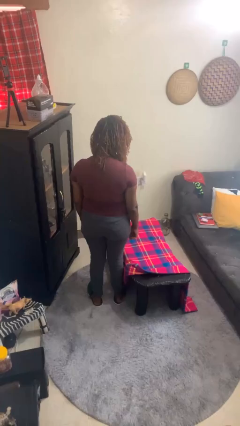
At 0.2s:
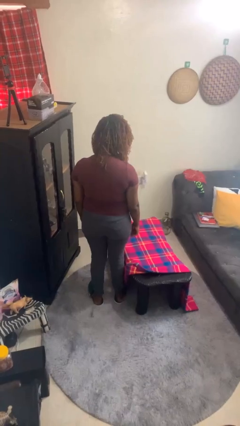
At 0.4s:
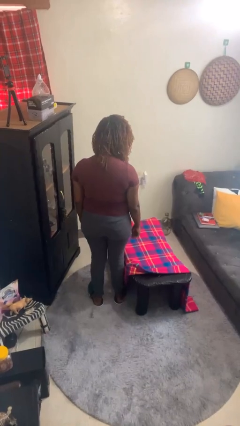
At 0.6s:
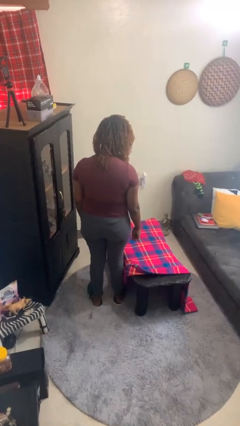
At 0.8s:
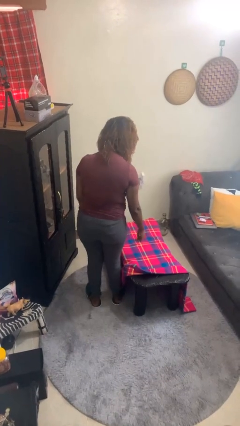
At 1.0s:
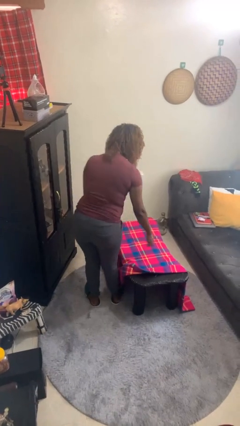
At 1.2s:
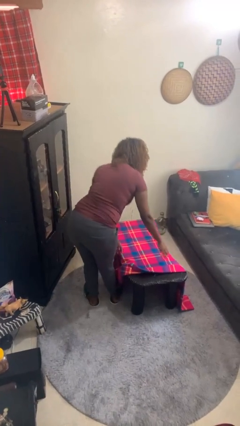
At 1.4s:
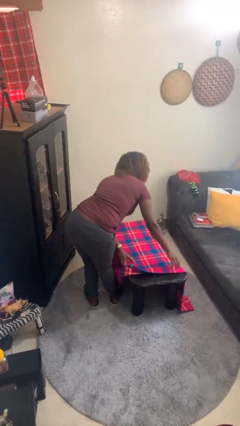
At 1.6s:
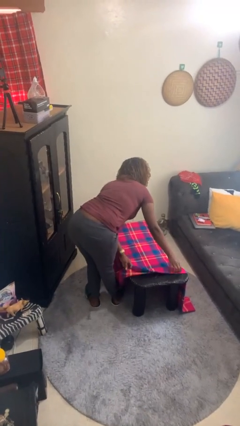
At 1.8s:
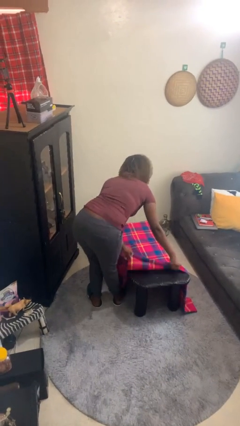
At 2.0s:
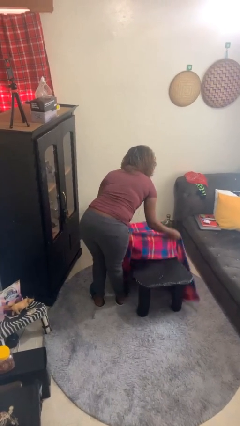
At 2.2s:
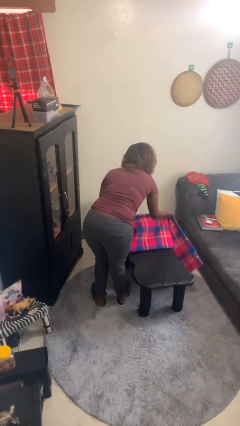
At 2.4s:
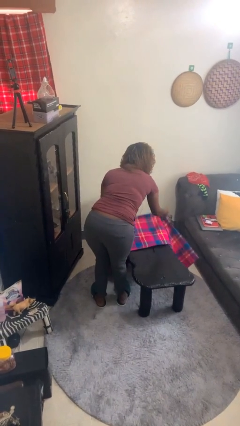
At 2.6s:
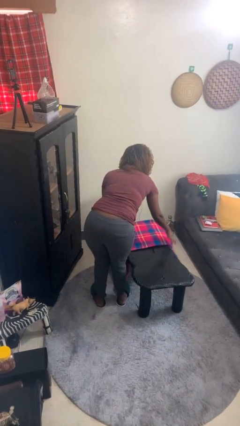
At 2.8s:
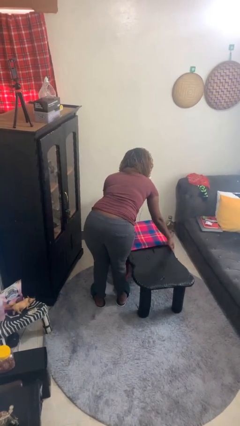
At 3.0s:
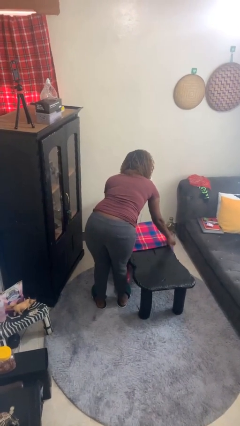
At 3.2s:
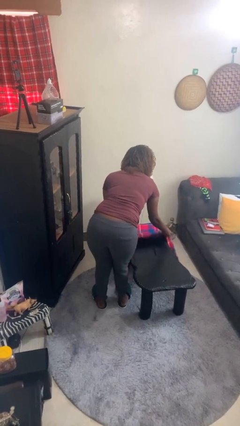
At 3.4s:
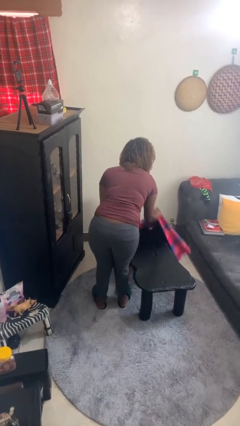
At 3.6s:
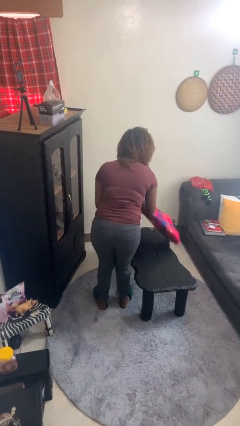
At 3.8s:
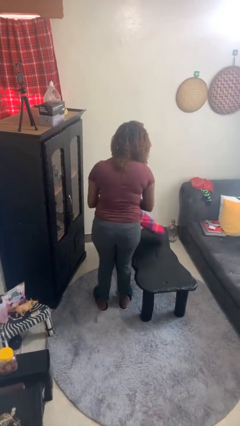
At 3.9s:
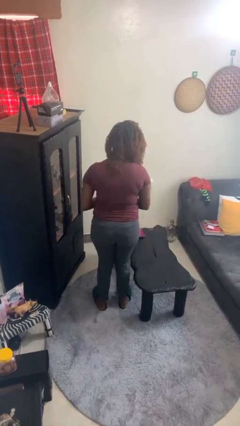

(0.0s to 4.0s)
person folds tablecloth

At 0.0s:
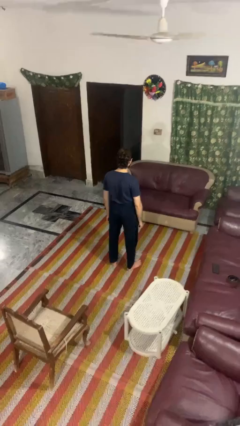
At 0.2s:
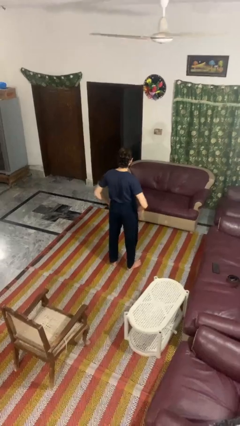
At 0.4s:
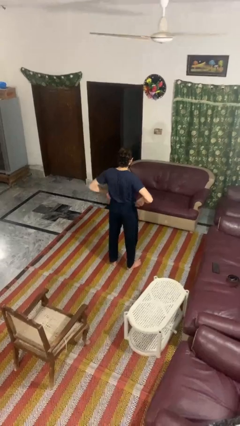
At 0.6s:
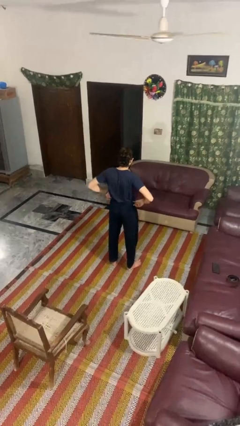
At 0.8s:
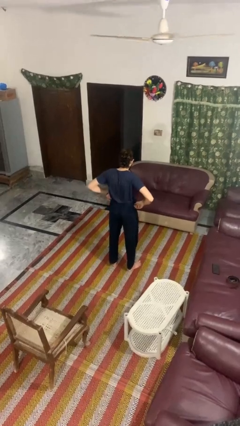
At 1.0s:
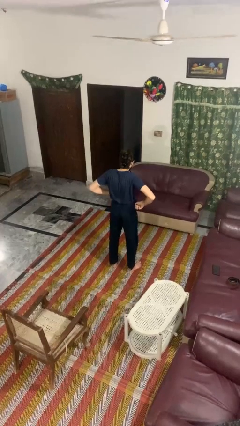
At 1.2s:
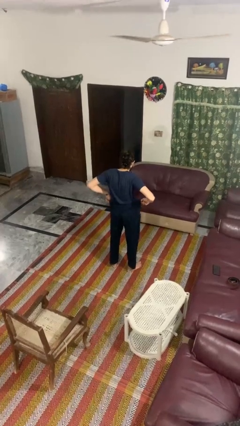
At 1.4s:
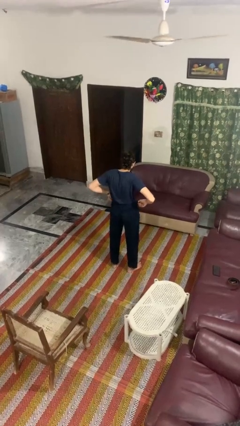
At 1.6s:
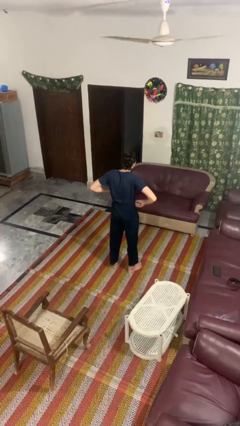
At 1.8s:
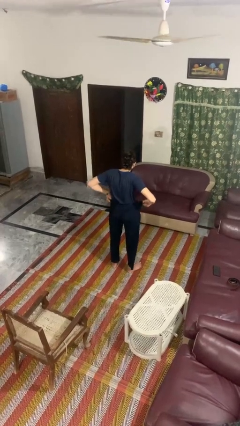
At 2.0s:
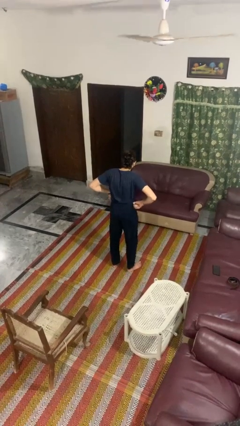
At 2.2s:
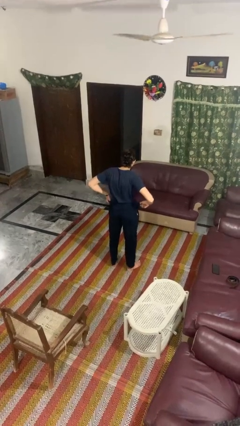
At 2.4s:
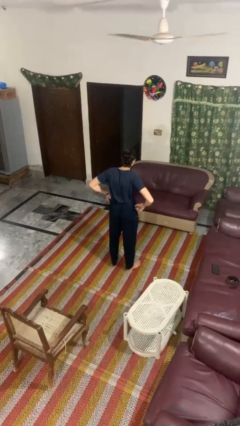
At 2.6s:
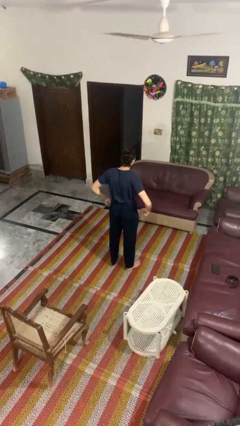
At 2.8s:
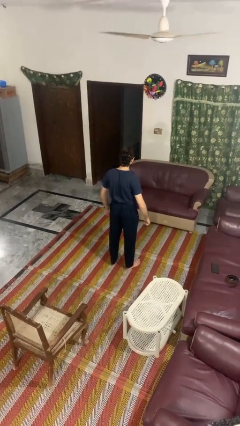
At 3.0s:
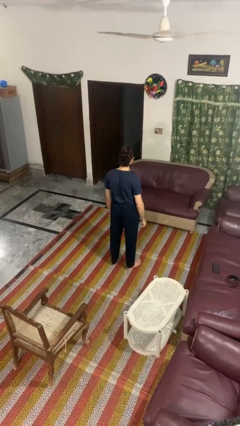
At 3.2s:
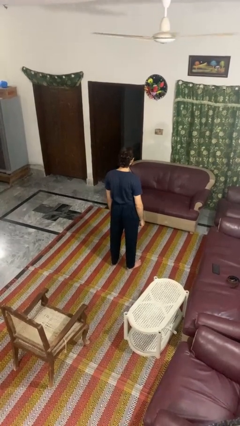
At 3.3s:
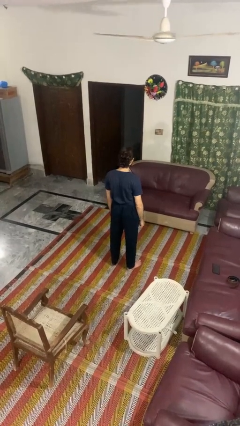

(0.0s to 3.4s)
person hikes up pants

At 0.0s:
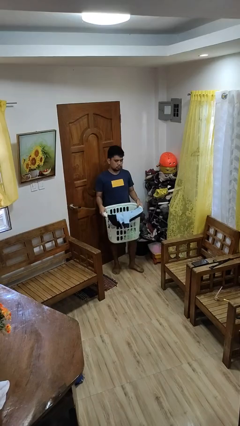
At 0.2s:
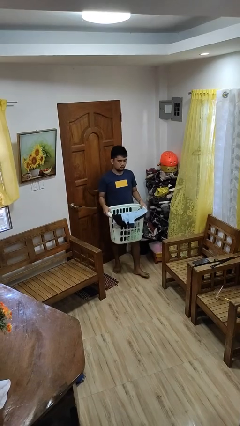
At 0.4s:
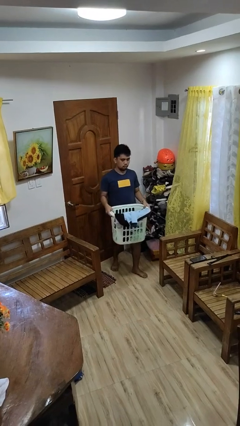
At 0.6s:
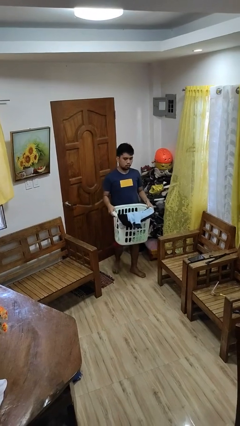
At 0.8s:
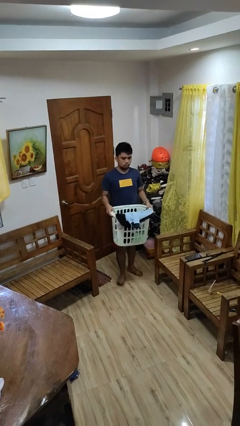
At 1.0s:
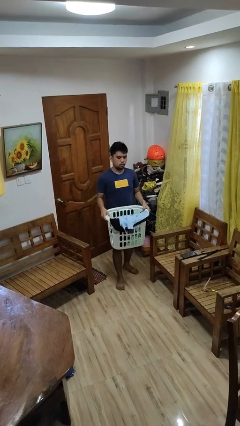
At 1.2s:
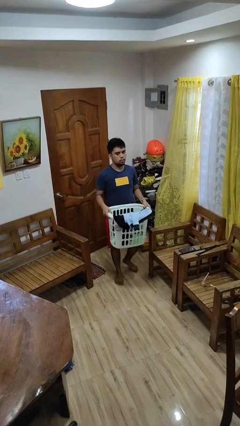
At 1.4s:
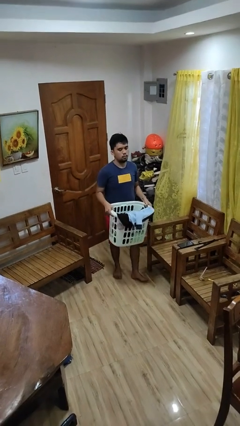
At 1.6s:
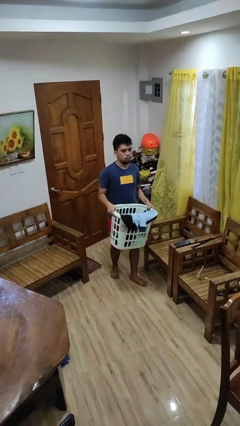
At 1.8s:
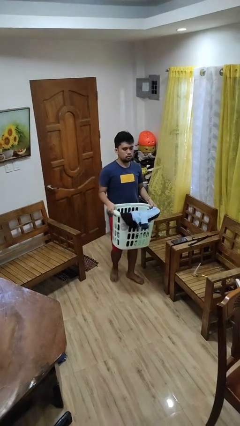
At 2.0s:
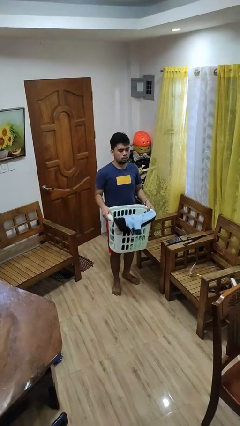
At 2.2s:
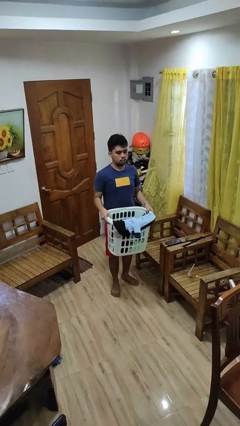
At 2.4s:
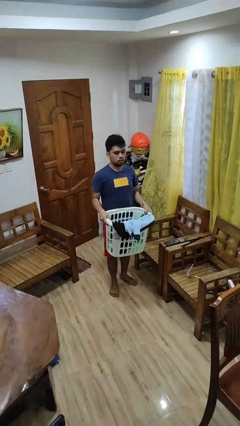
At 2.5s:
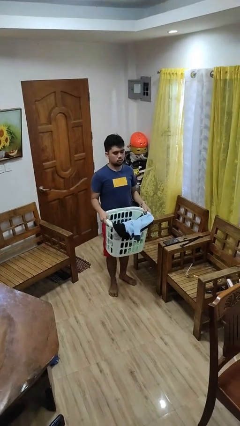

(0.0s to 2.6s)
person carries laundry basket

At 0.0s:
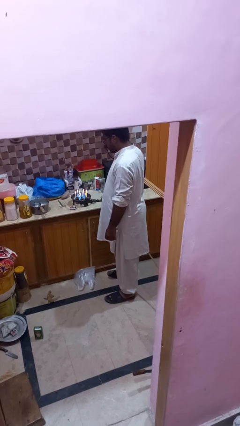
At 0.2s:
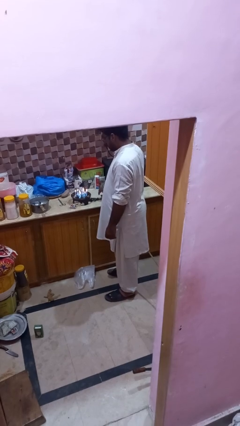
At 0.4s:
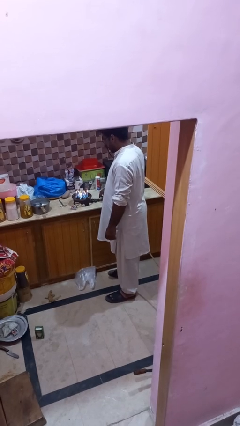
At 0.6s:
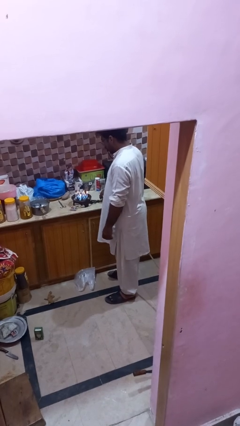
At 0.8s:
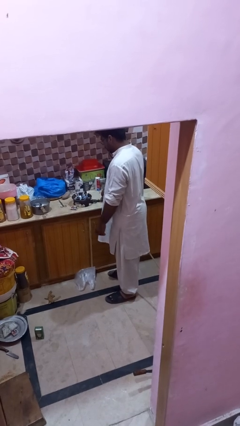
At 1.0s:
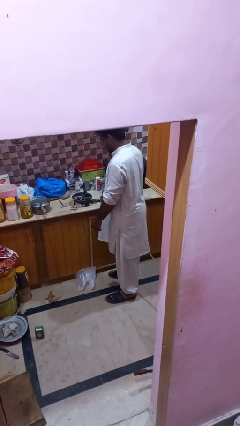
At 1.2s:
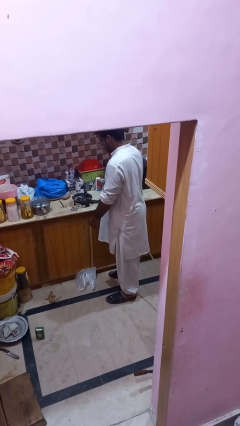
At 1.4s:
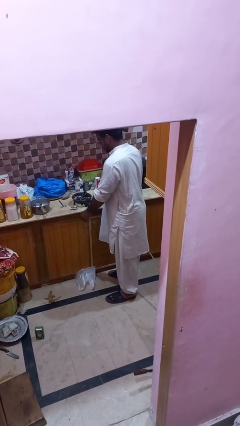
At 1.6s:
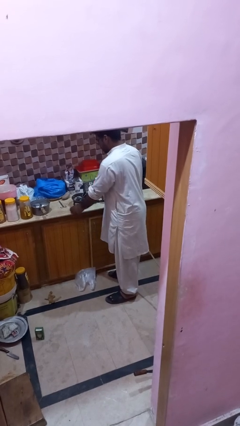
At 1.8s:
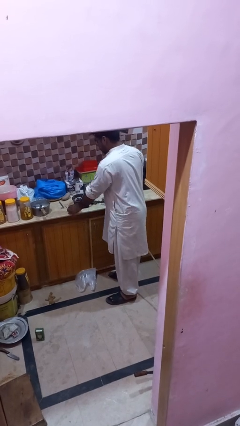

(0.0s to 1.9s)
person turns off stovetop

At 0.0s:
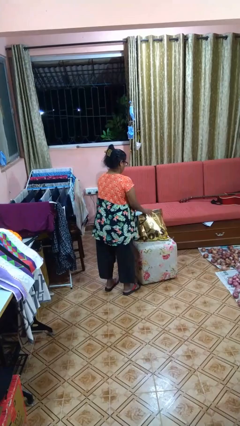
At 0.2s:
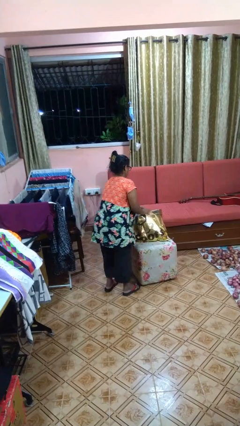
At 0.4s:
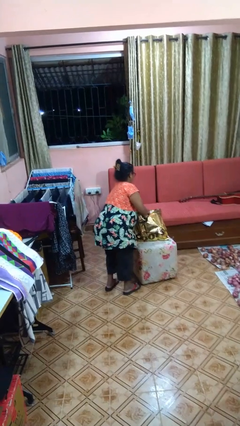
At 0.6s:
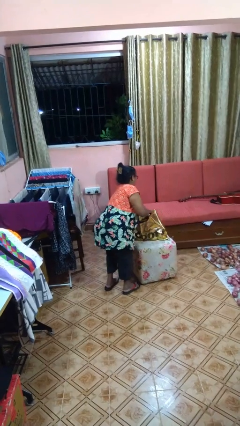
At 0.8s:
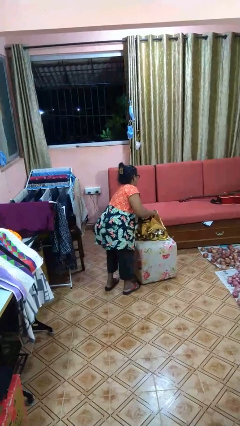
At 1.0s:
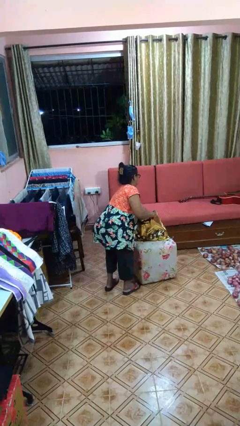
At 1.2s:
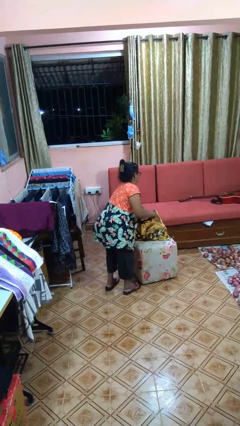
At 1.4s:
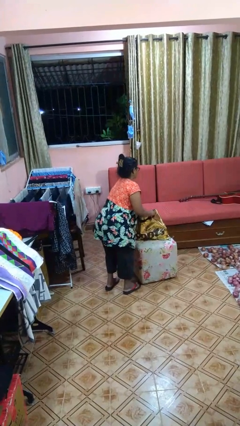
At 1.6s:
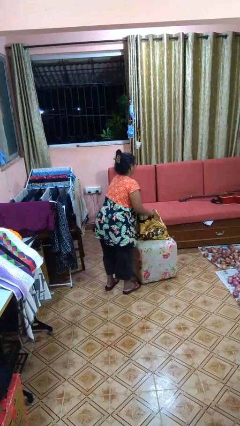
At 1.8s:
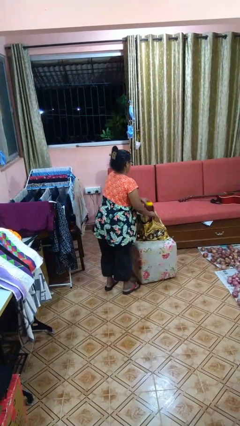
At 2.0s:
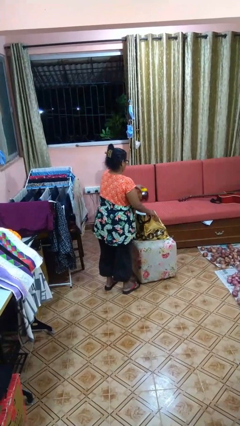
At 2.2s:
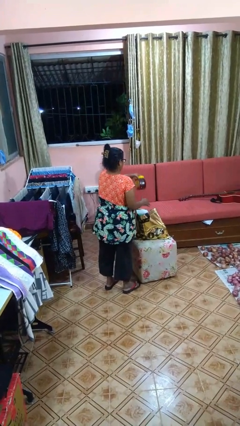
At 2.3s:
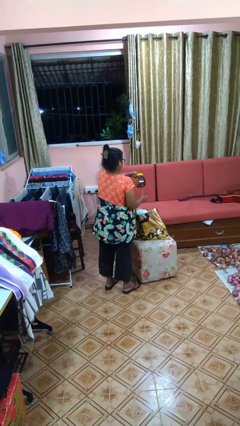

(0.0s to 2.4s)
person takes object from bag

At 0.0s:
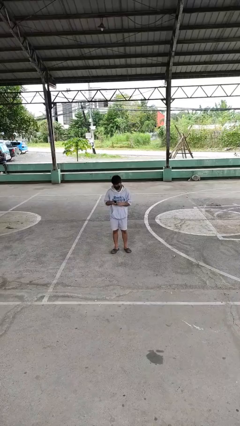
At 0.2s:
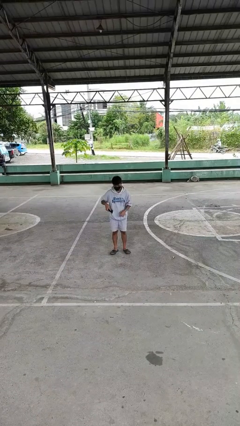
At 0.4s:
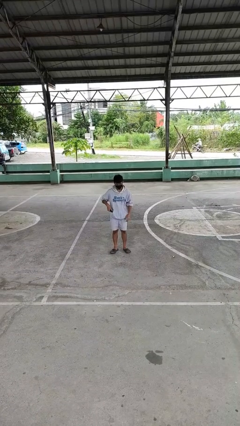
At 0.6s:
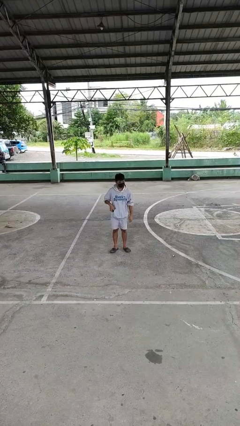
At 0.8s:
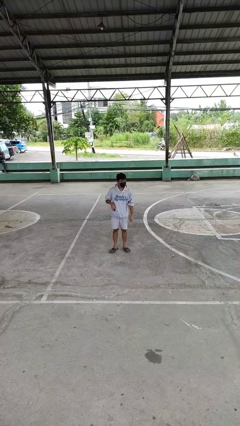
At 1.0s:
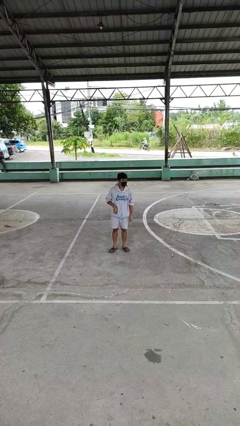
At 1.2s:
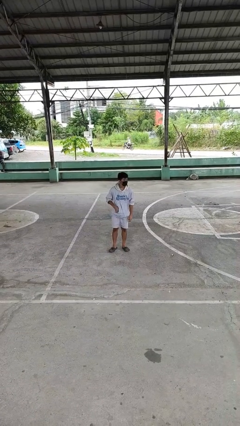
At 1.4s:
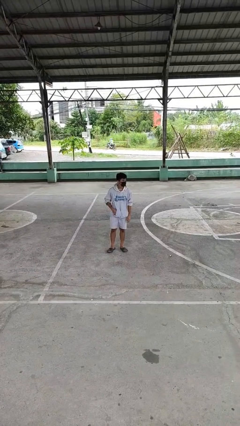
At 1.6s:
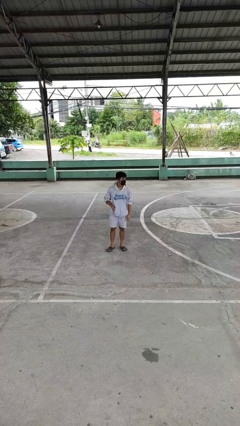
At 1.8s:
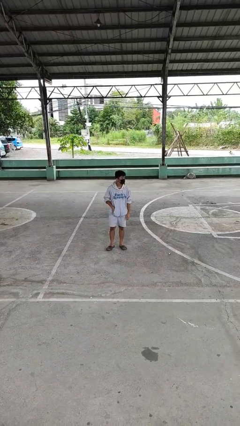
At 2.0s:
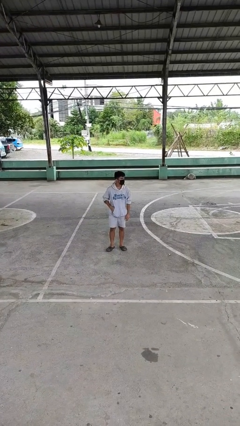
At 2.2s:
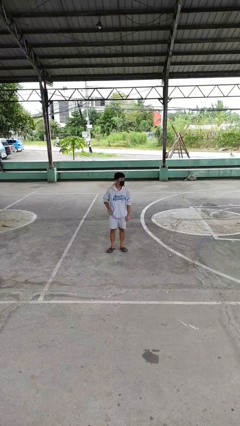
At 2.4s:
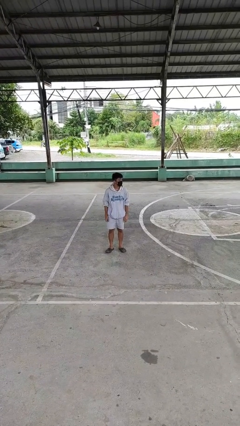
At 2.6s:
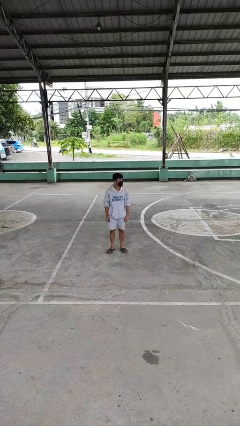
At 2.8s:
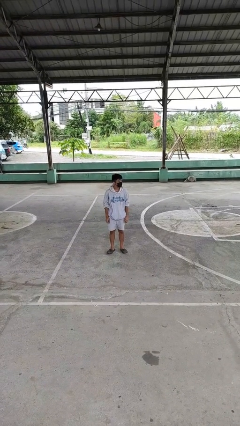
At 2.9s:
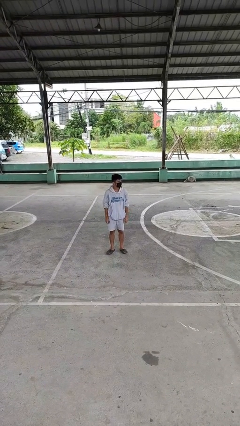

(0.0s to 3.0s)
person puts phone into pocket

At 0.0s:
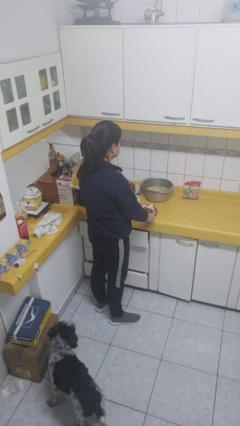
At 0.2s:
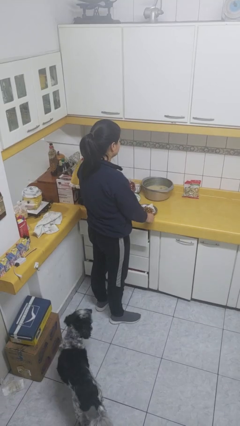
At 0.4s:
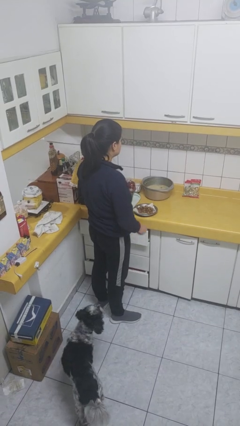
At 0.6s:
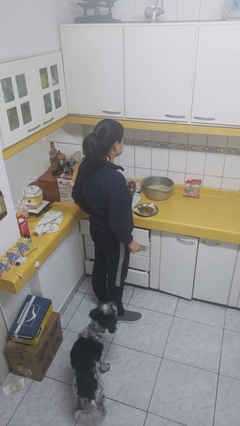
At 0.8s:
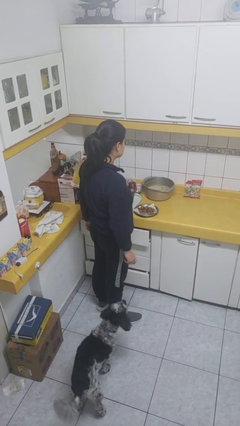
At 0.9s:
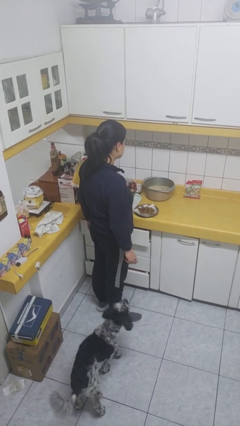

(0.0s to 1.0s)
person puts down object on countertop
